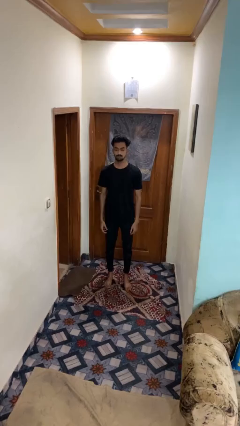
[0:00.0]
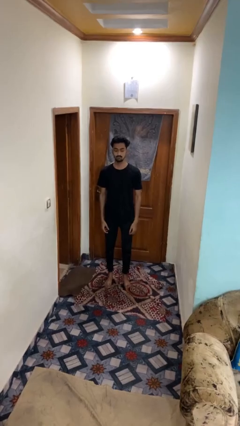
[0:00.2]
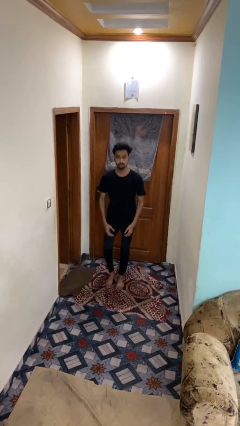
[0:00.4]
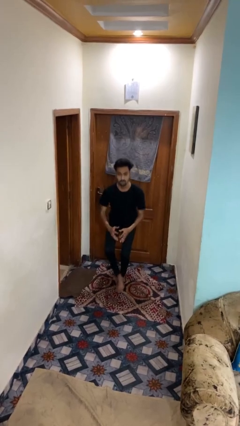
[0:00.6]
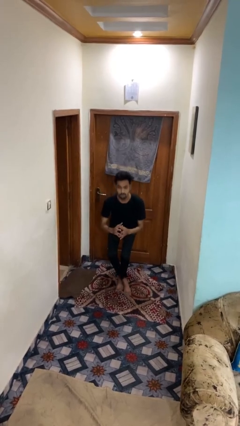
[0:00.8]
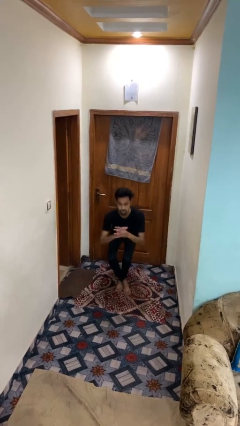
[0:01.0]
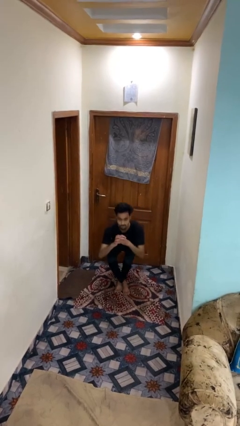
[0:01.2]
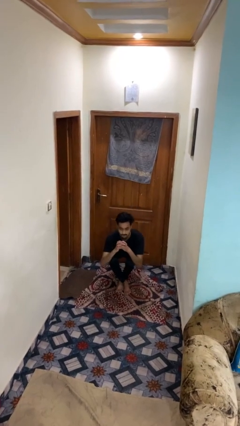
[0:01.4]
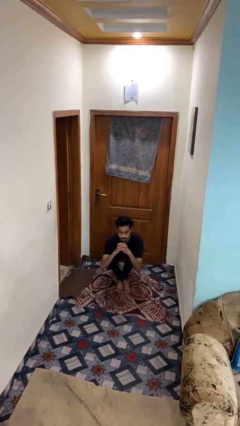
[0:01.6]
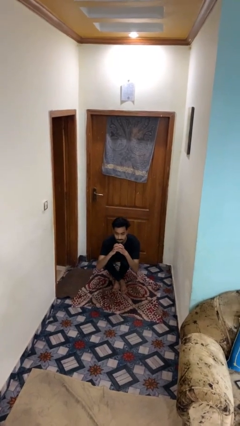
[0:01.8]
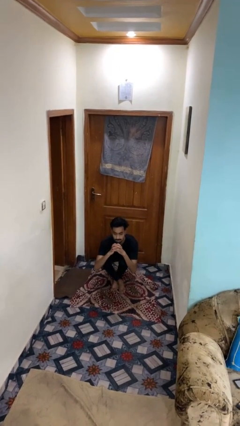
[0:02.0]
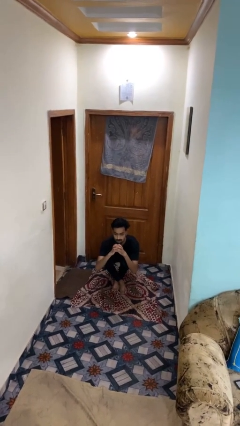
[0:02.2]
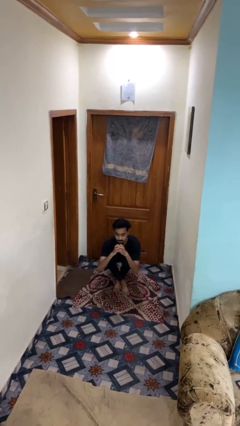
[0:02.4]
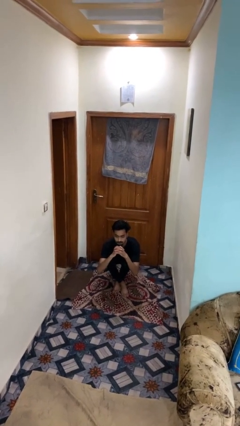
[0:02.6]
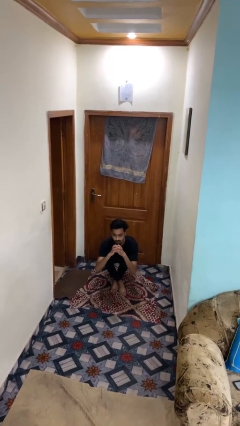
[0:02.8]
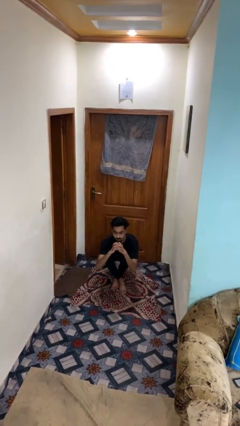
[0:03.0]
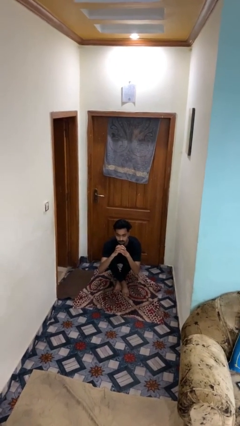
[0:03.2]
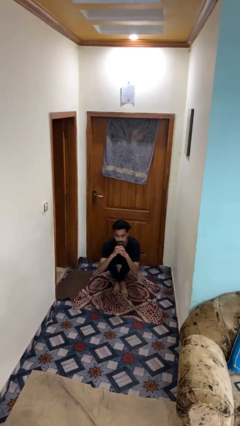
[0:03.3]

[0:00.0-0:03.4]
person sits crisscross

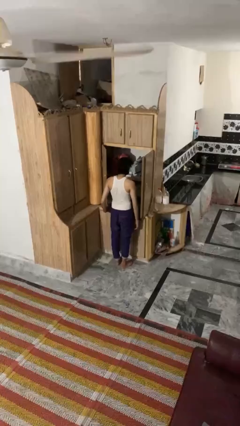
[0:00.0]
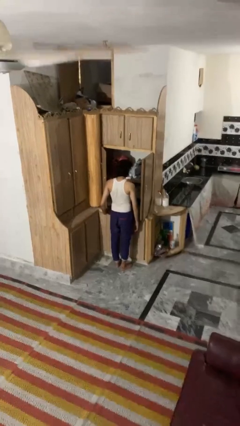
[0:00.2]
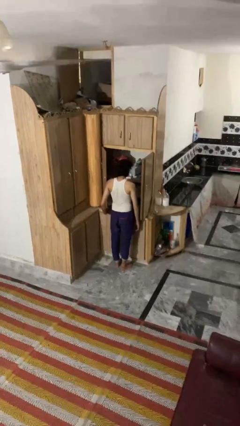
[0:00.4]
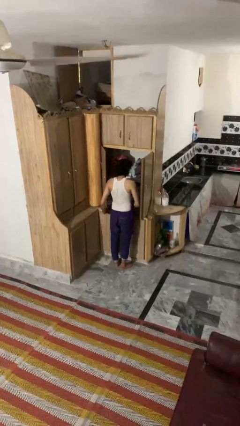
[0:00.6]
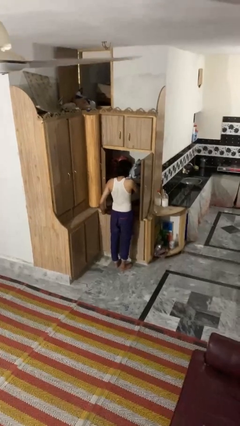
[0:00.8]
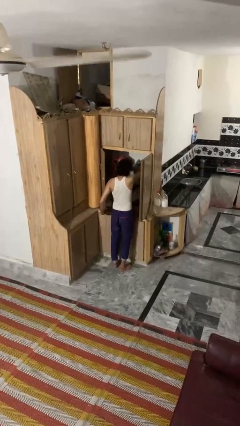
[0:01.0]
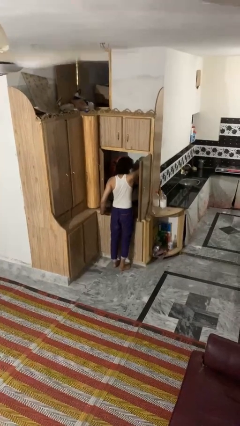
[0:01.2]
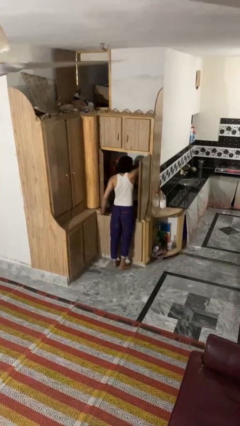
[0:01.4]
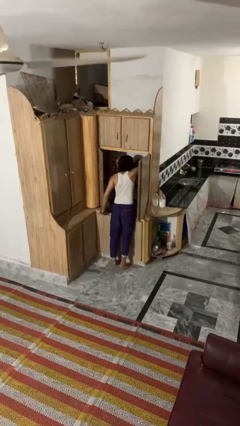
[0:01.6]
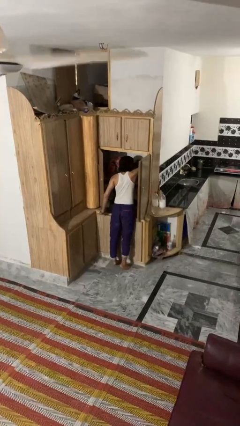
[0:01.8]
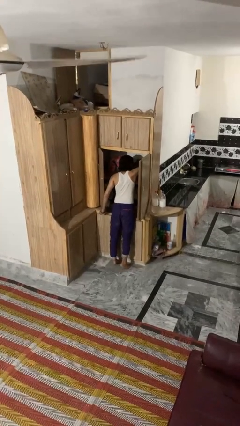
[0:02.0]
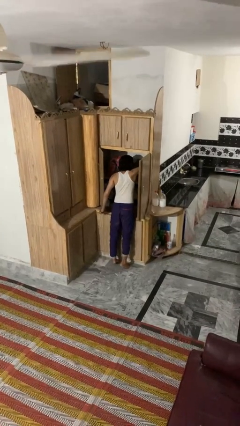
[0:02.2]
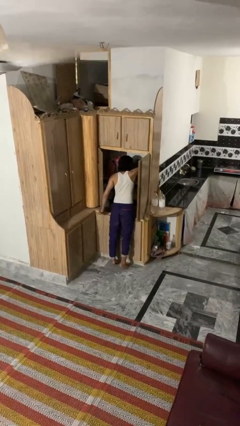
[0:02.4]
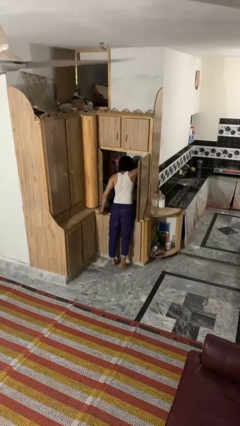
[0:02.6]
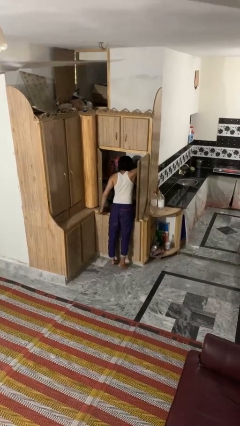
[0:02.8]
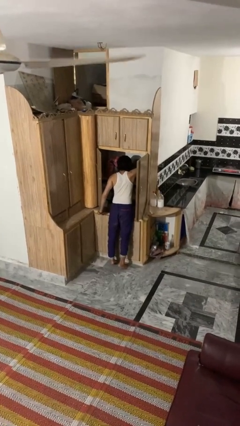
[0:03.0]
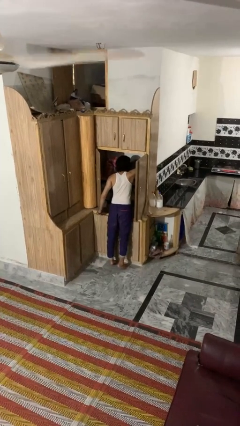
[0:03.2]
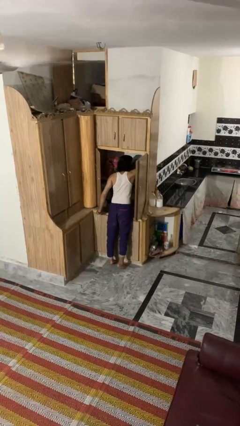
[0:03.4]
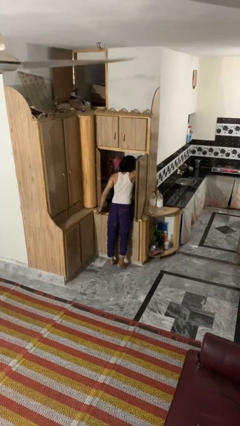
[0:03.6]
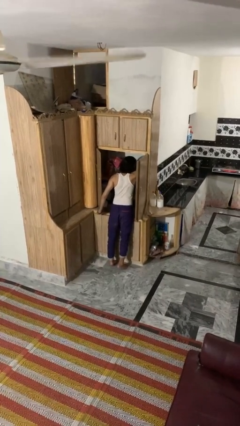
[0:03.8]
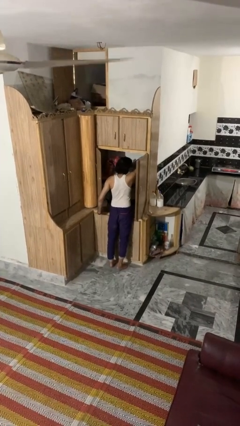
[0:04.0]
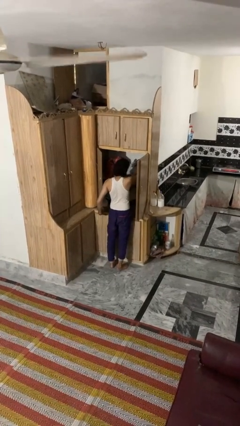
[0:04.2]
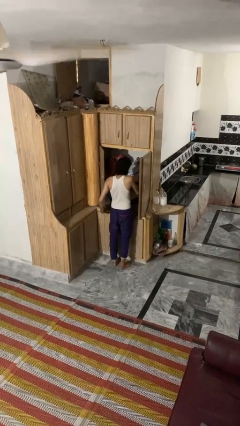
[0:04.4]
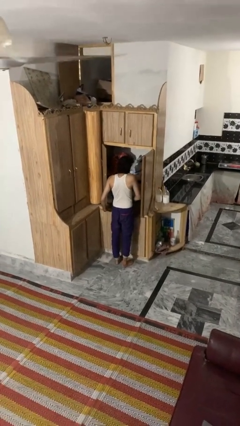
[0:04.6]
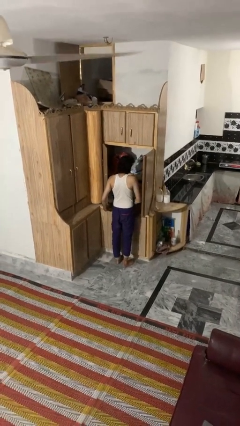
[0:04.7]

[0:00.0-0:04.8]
person searches in cabinet

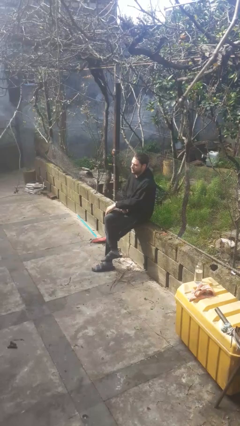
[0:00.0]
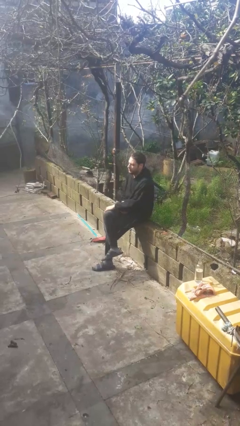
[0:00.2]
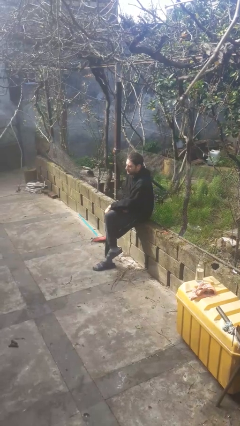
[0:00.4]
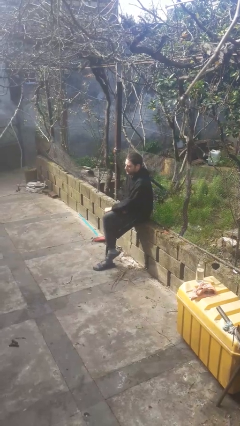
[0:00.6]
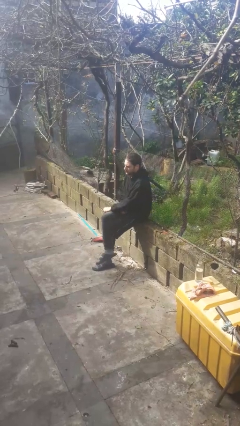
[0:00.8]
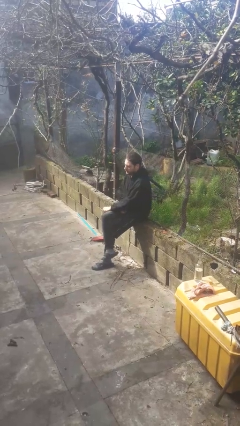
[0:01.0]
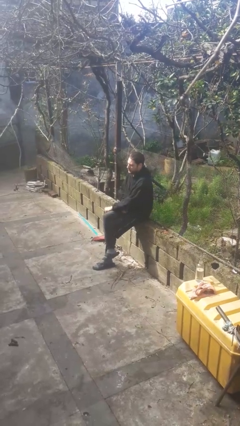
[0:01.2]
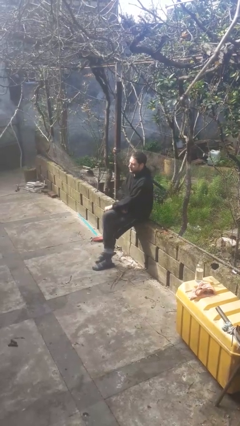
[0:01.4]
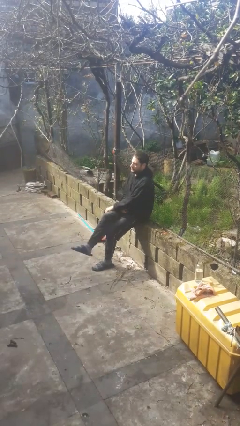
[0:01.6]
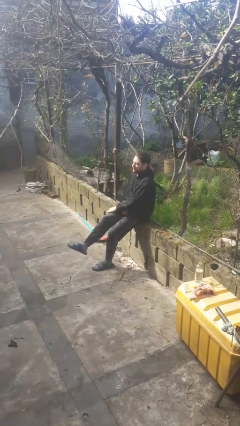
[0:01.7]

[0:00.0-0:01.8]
person crosses legs

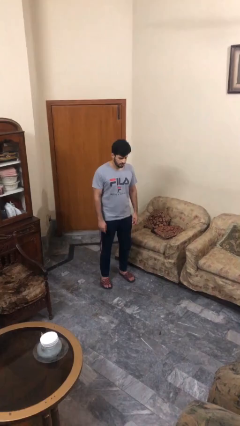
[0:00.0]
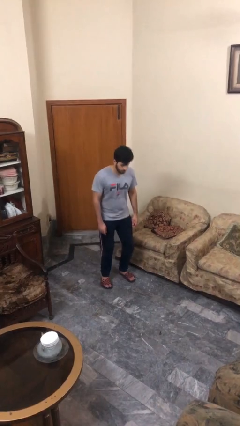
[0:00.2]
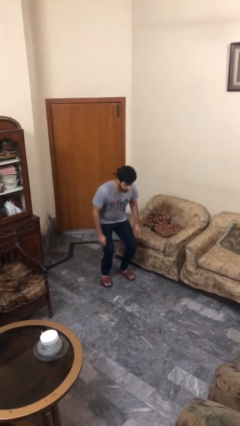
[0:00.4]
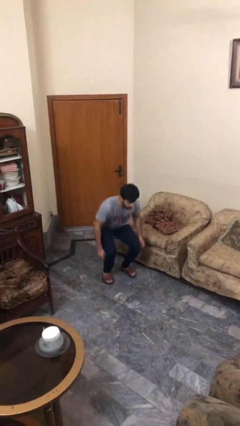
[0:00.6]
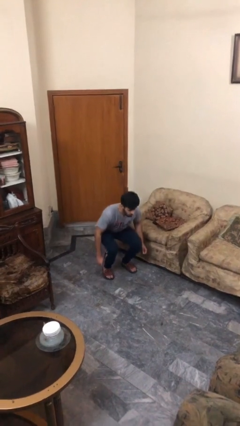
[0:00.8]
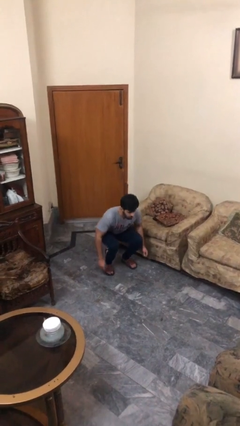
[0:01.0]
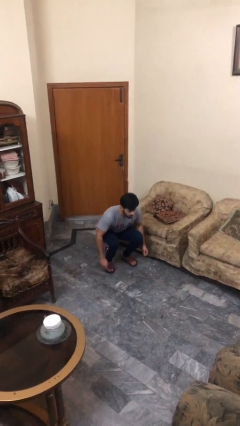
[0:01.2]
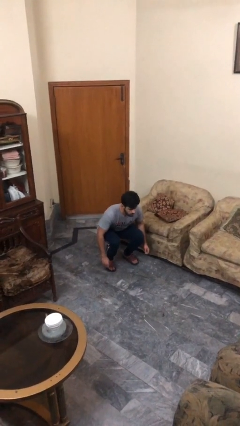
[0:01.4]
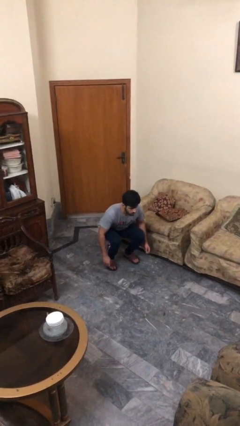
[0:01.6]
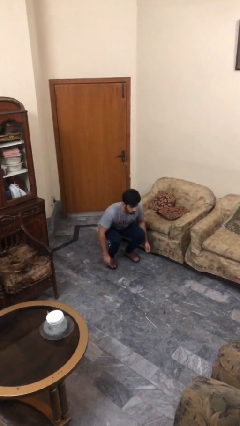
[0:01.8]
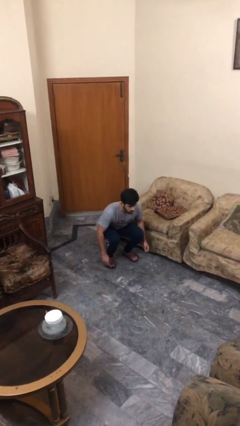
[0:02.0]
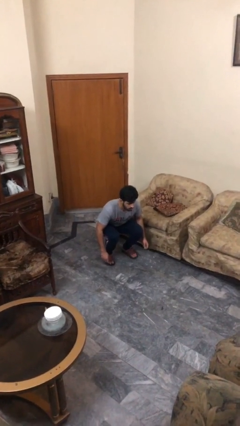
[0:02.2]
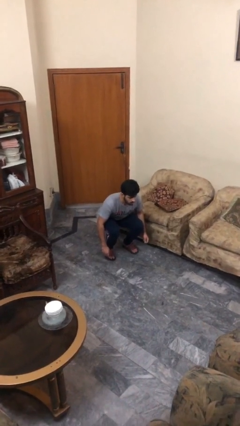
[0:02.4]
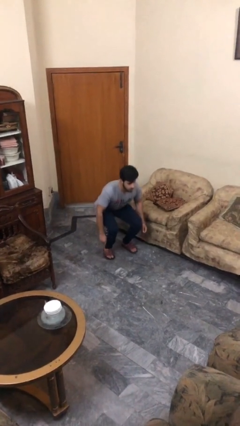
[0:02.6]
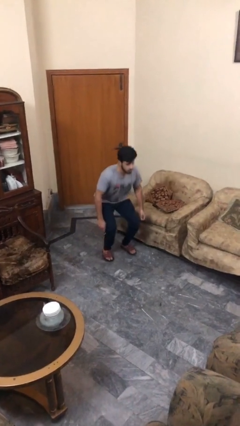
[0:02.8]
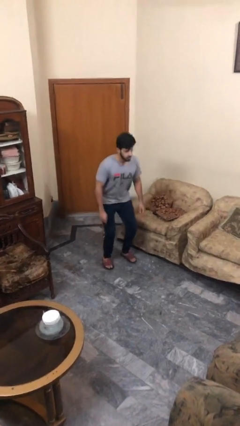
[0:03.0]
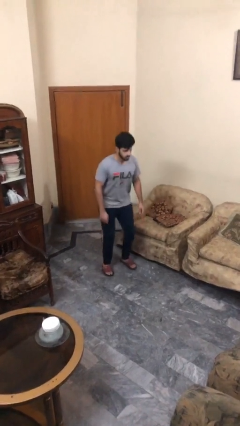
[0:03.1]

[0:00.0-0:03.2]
person squats

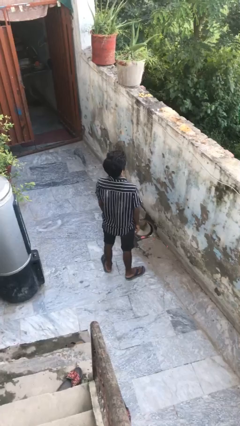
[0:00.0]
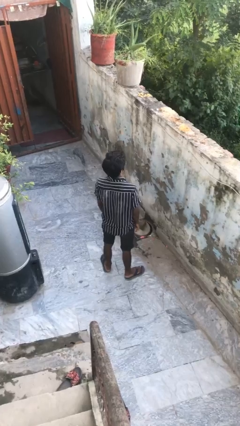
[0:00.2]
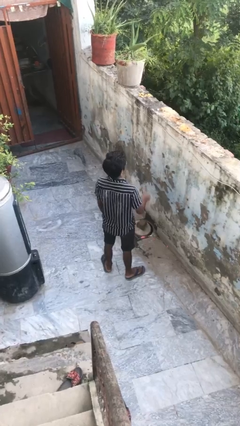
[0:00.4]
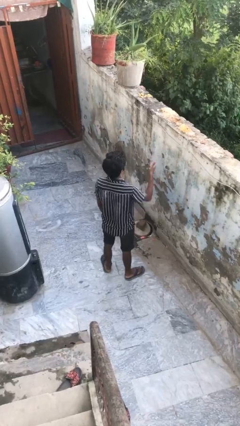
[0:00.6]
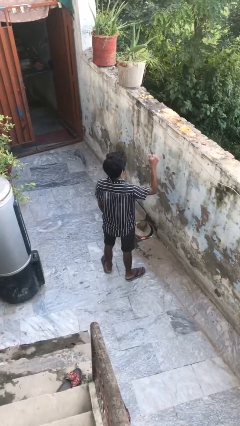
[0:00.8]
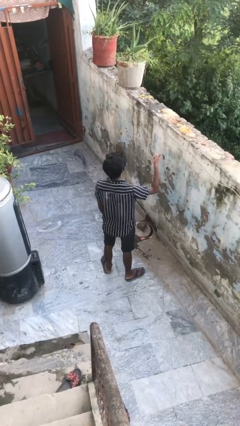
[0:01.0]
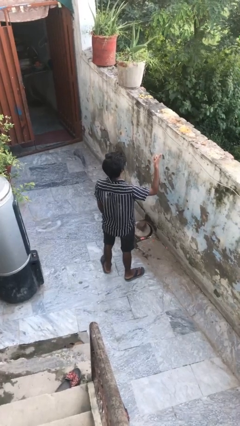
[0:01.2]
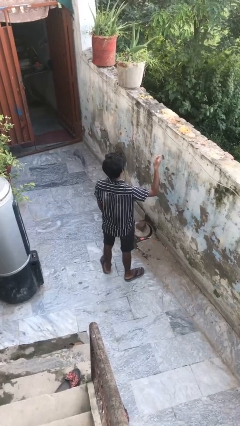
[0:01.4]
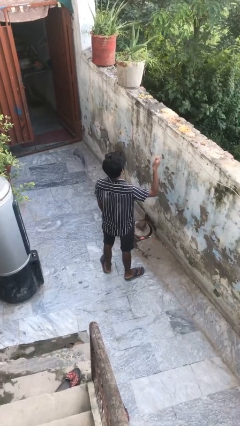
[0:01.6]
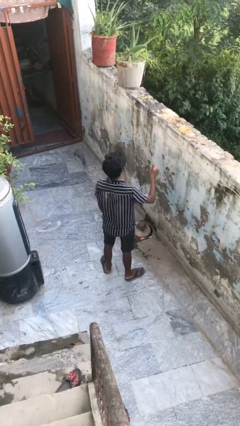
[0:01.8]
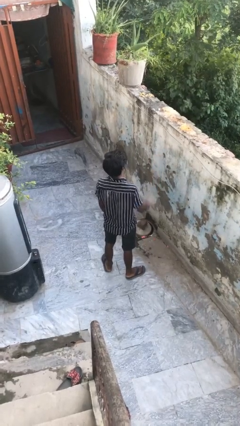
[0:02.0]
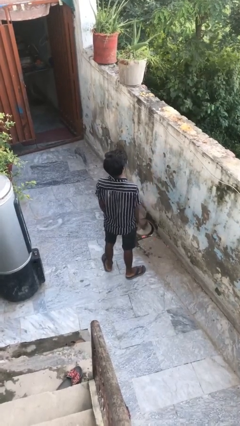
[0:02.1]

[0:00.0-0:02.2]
person gestures hang loose

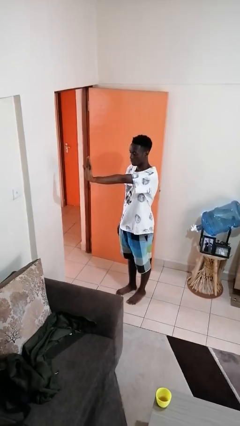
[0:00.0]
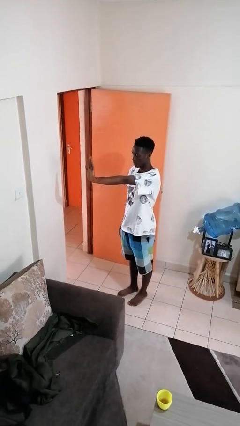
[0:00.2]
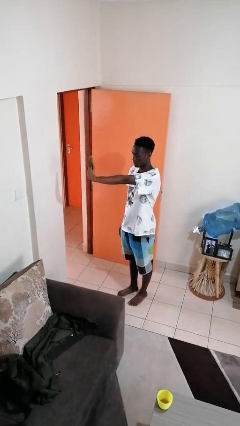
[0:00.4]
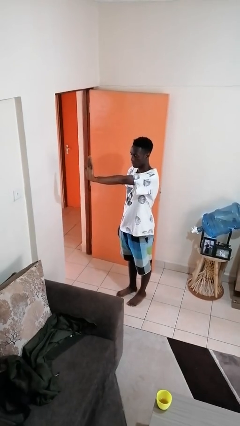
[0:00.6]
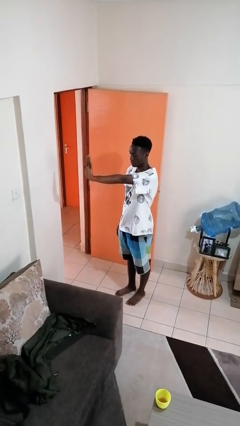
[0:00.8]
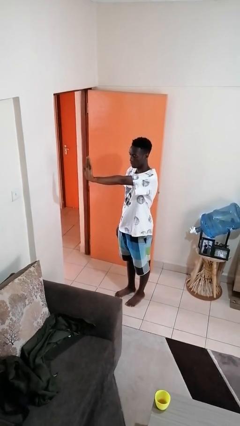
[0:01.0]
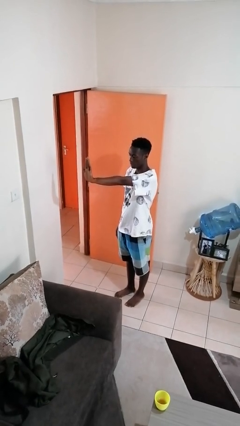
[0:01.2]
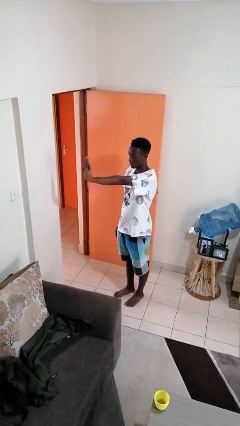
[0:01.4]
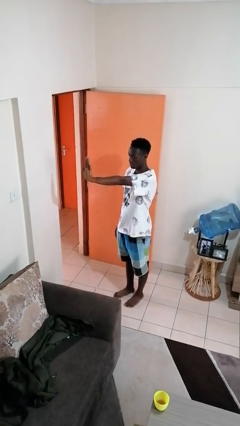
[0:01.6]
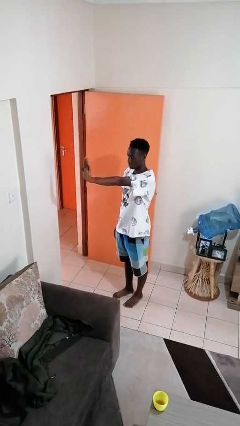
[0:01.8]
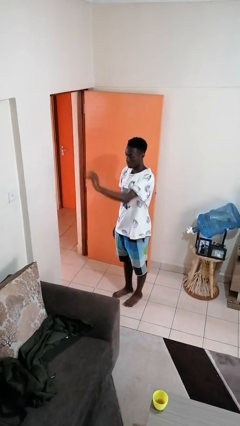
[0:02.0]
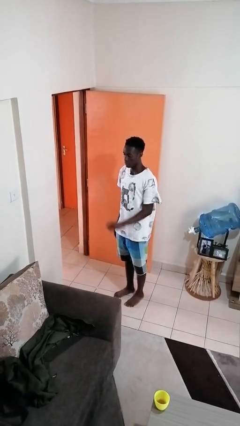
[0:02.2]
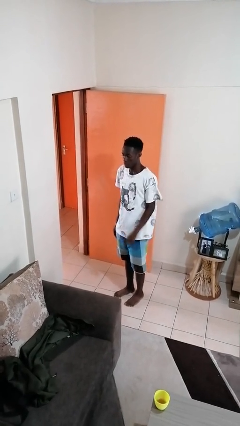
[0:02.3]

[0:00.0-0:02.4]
person gestures stop
